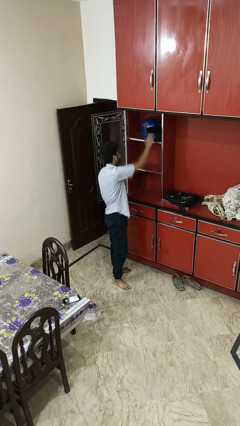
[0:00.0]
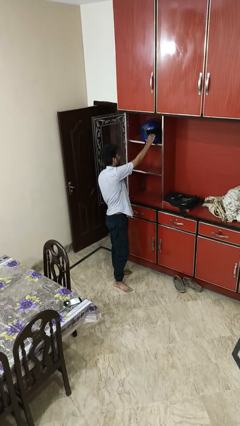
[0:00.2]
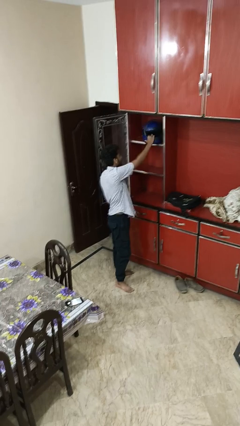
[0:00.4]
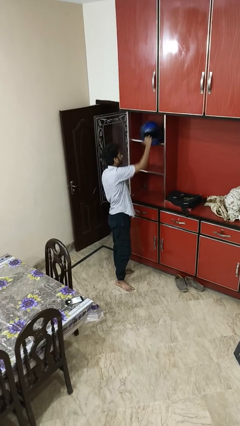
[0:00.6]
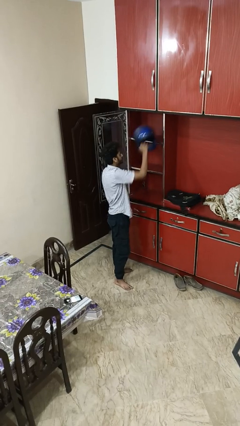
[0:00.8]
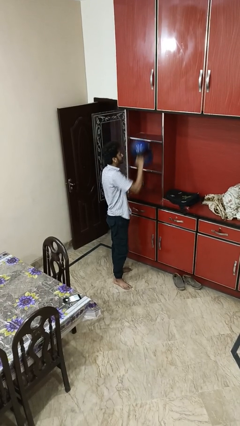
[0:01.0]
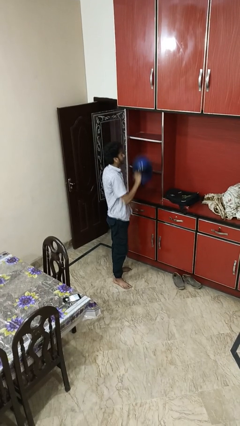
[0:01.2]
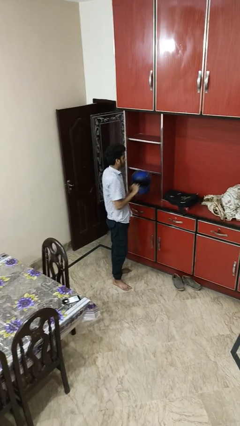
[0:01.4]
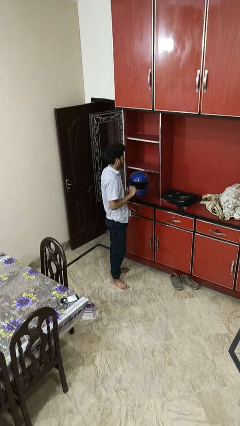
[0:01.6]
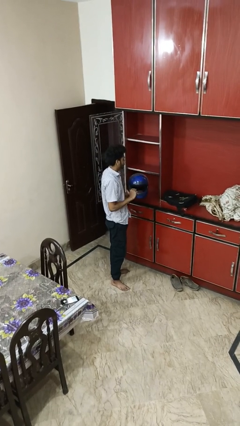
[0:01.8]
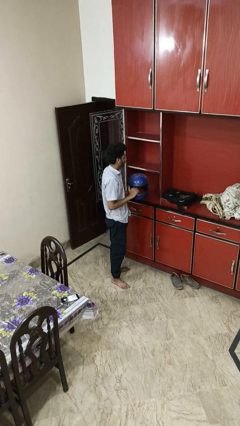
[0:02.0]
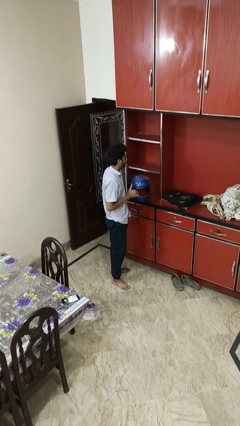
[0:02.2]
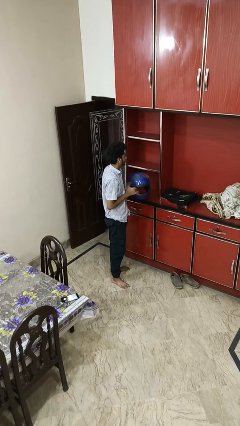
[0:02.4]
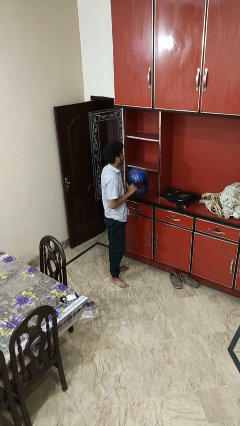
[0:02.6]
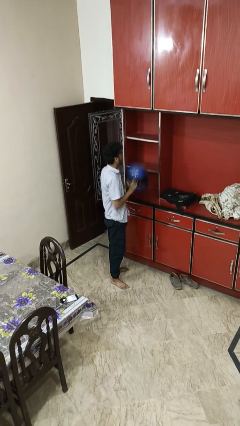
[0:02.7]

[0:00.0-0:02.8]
person picks up object from shelf

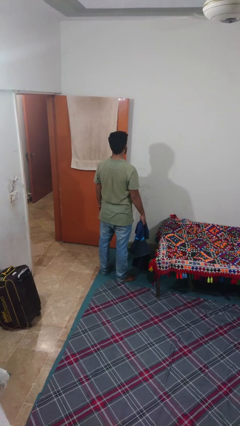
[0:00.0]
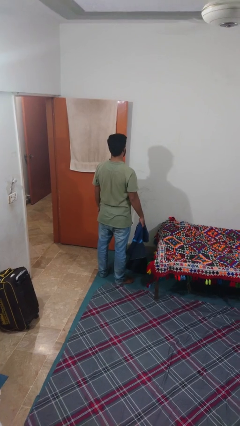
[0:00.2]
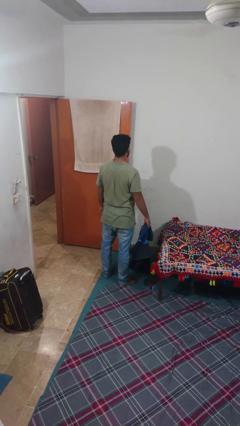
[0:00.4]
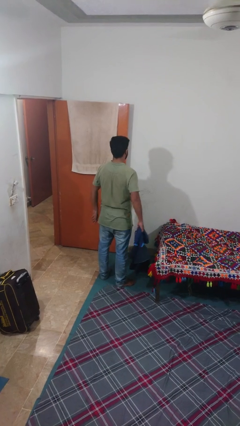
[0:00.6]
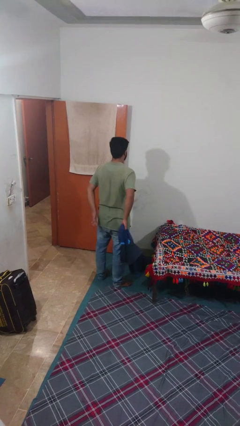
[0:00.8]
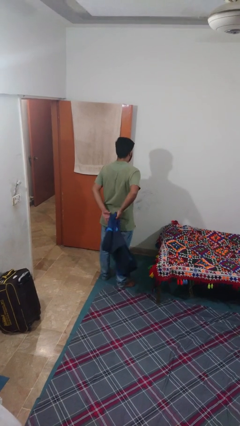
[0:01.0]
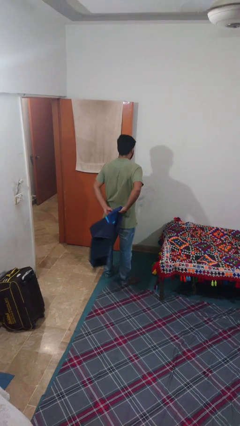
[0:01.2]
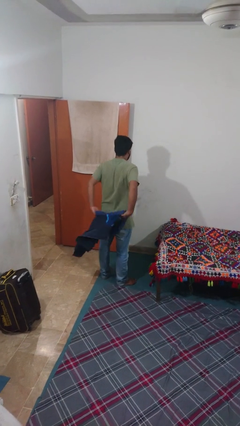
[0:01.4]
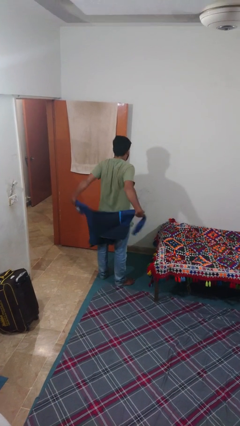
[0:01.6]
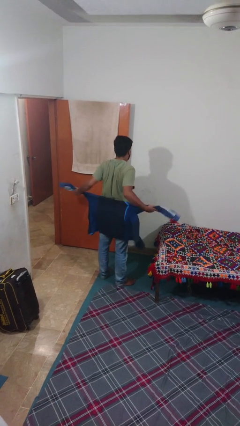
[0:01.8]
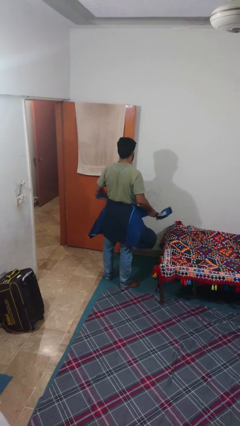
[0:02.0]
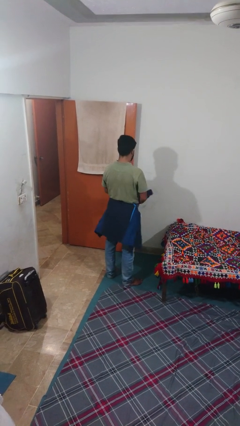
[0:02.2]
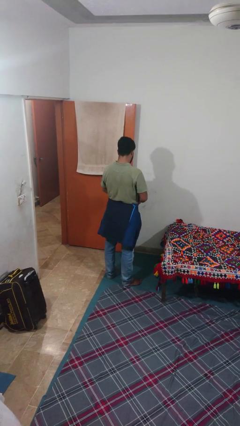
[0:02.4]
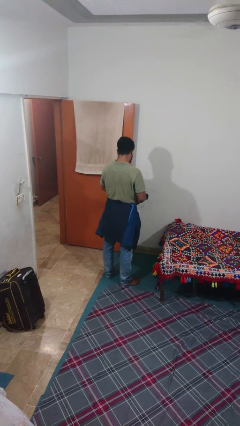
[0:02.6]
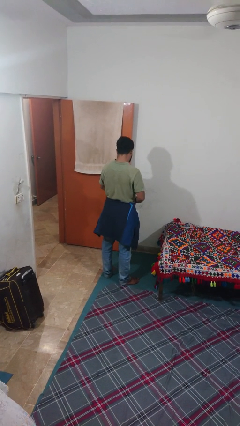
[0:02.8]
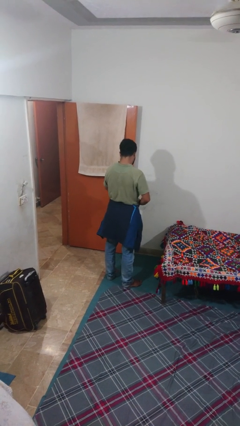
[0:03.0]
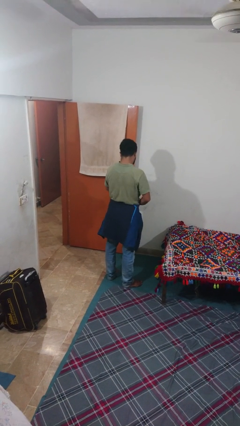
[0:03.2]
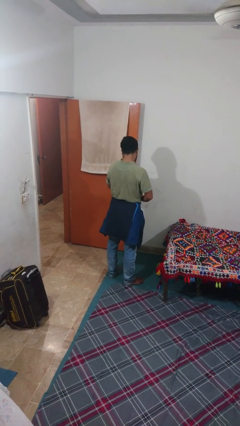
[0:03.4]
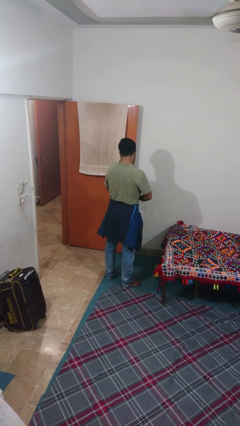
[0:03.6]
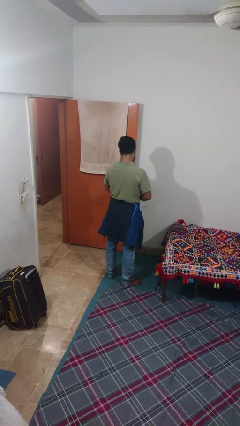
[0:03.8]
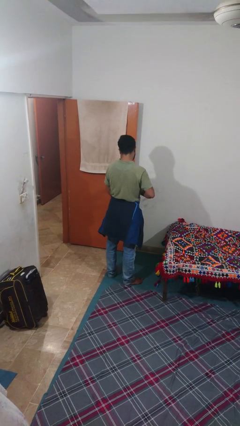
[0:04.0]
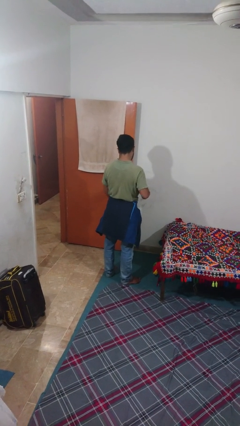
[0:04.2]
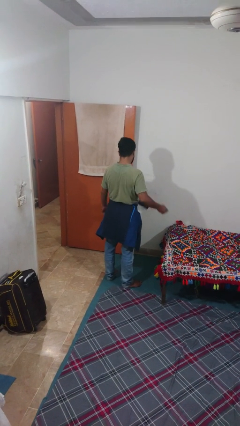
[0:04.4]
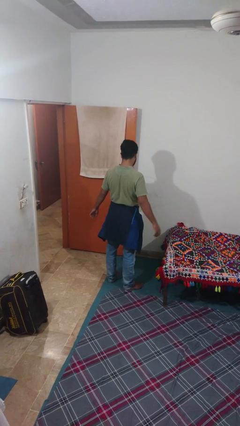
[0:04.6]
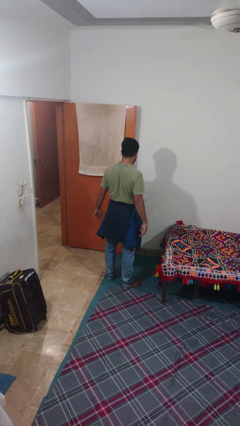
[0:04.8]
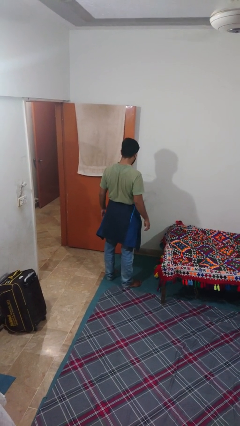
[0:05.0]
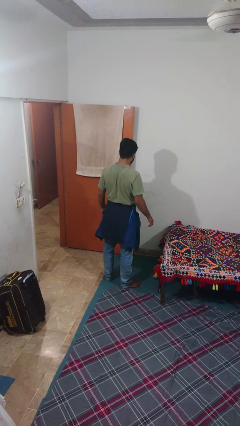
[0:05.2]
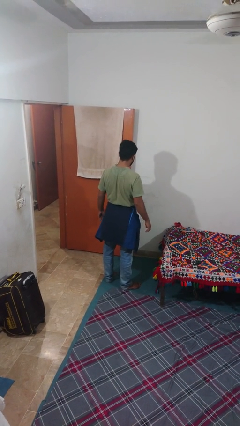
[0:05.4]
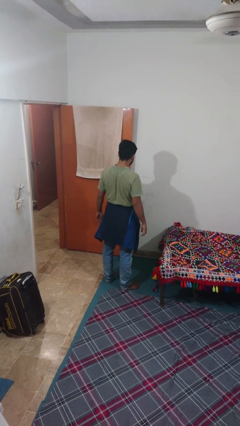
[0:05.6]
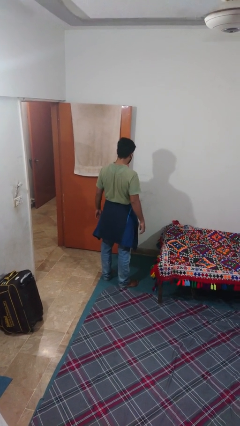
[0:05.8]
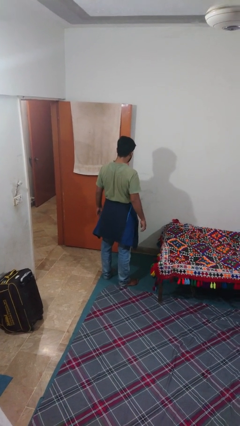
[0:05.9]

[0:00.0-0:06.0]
person ties jacket around waist

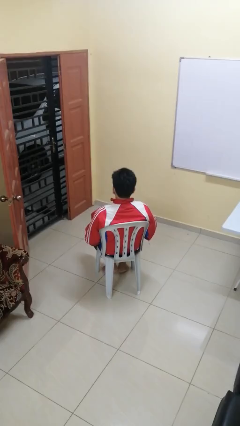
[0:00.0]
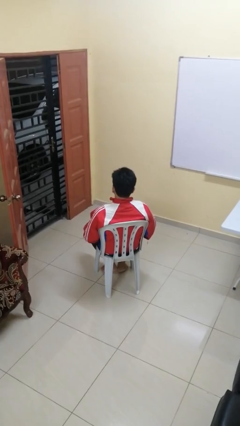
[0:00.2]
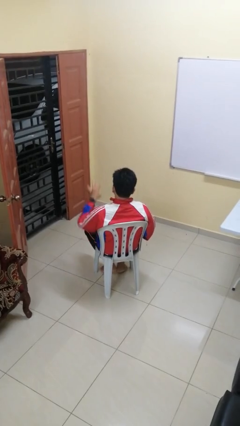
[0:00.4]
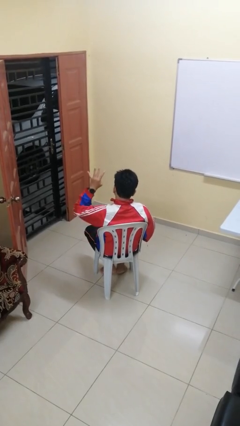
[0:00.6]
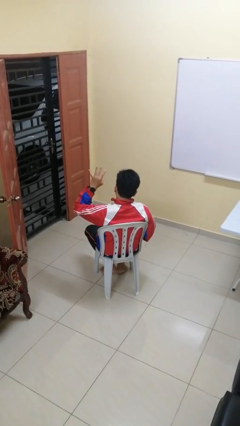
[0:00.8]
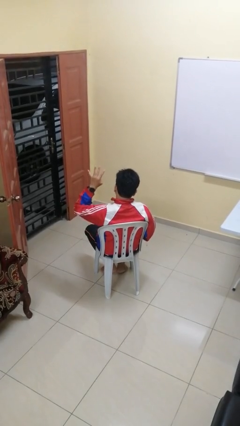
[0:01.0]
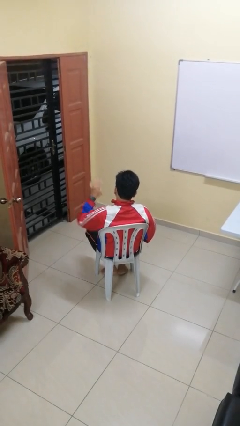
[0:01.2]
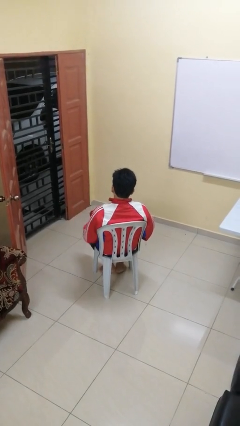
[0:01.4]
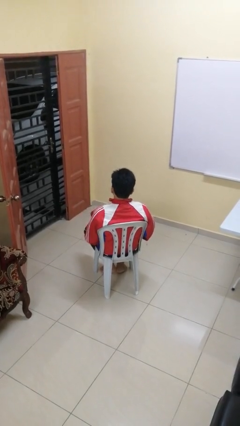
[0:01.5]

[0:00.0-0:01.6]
person gestures number four

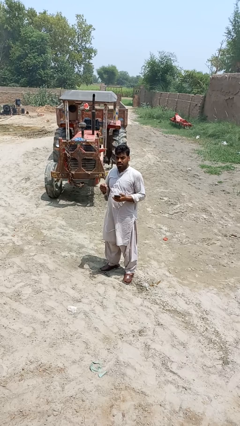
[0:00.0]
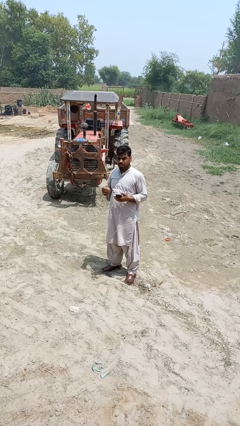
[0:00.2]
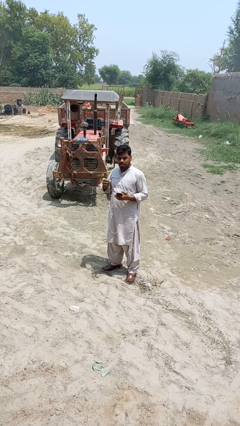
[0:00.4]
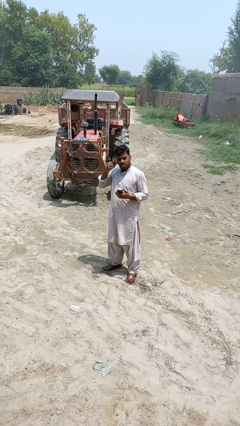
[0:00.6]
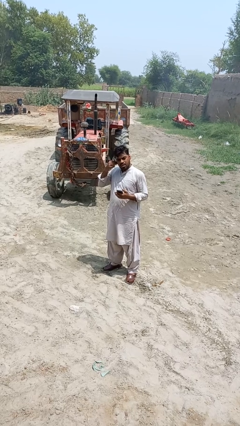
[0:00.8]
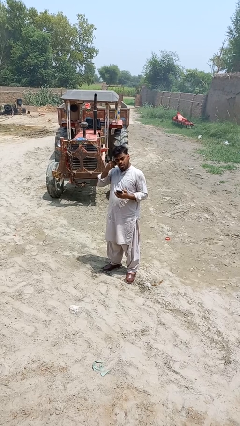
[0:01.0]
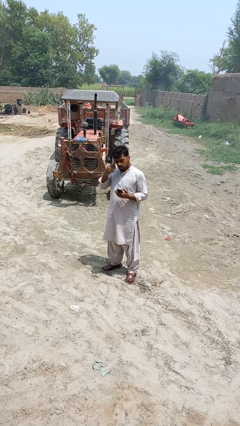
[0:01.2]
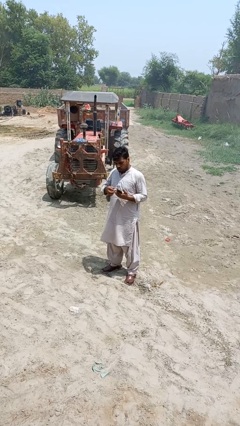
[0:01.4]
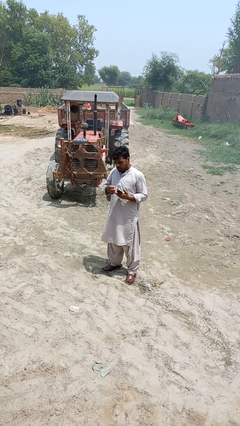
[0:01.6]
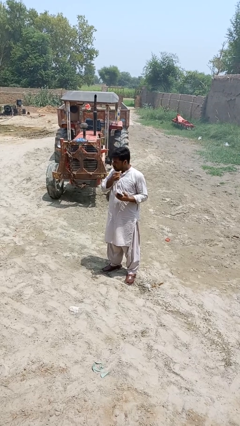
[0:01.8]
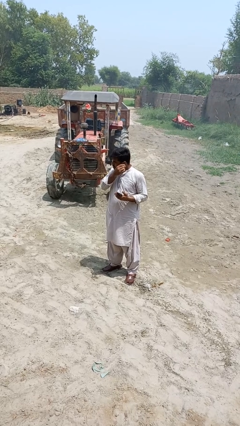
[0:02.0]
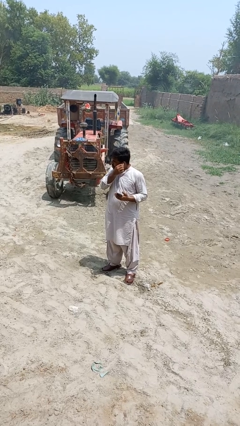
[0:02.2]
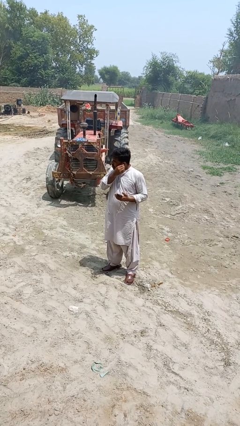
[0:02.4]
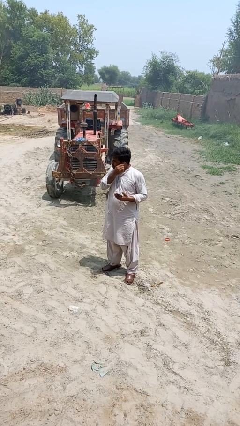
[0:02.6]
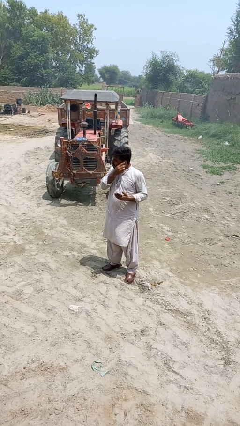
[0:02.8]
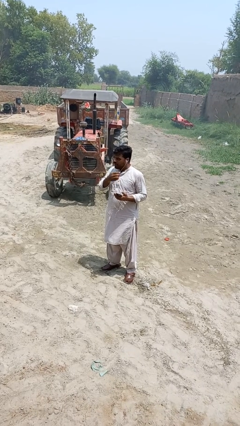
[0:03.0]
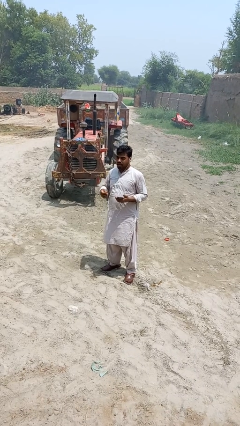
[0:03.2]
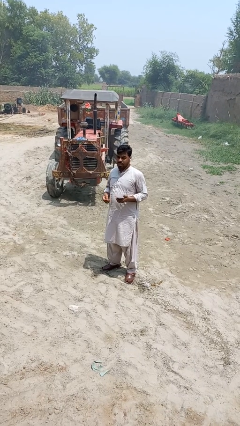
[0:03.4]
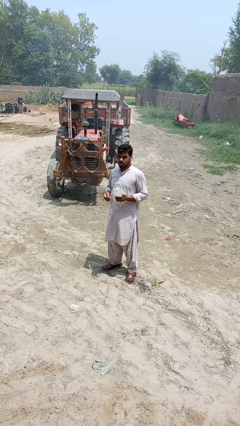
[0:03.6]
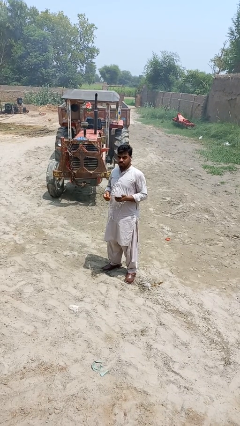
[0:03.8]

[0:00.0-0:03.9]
person puts on headphones

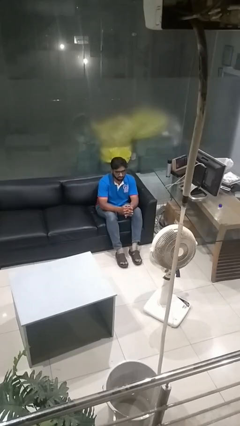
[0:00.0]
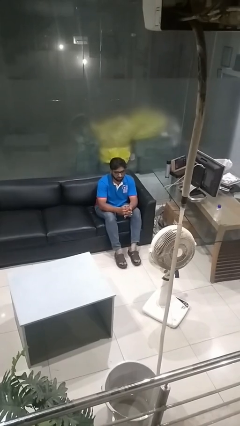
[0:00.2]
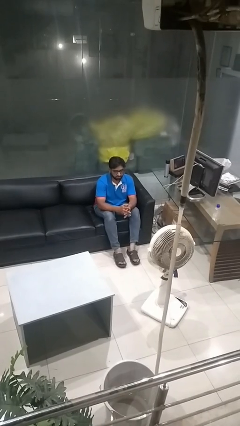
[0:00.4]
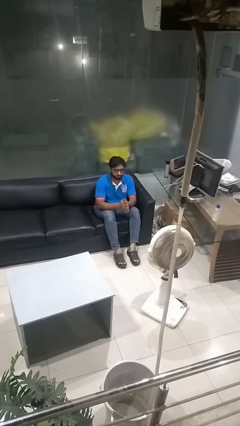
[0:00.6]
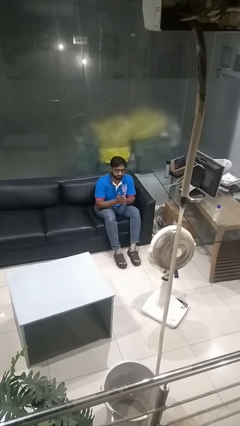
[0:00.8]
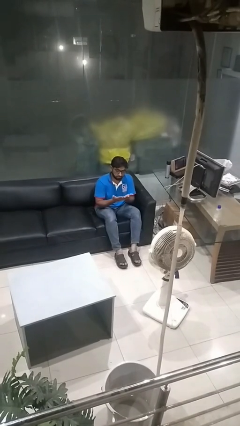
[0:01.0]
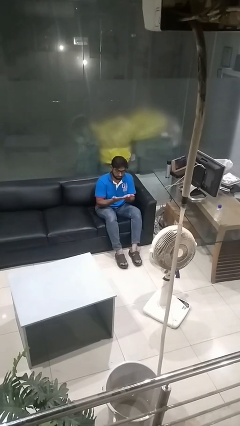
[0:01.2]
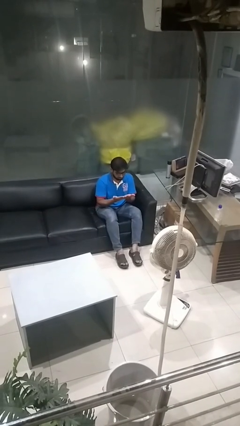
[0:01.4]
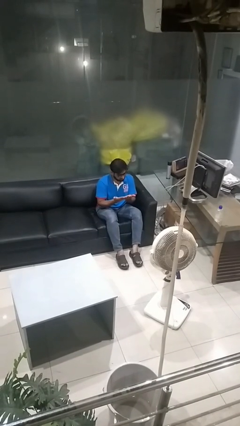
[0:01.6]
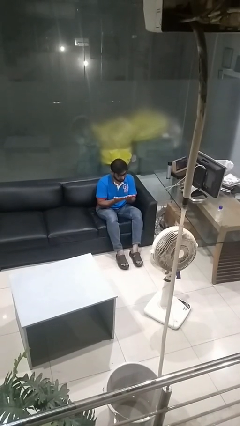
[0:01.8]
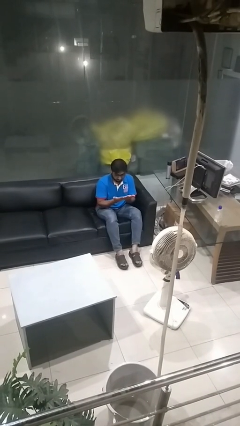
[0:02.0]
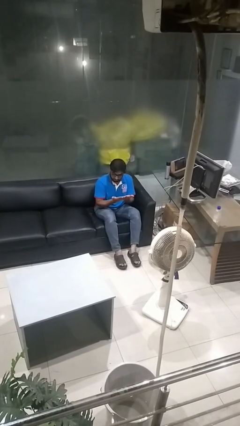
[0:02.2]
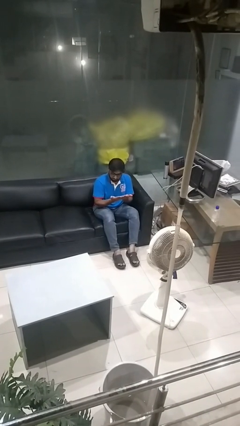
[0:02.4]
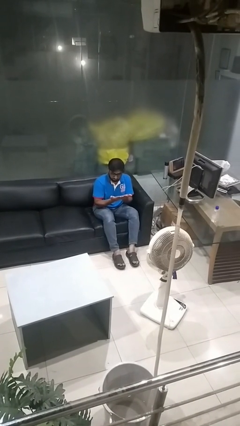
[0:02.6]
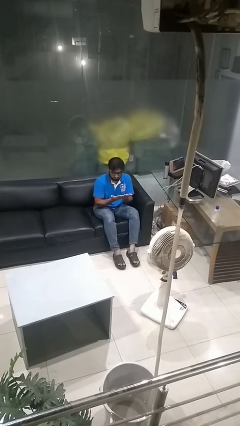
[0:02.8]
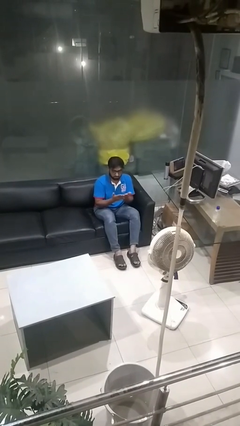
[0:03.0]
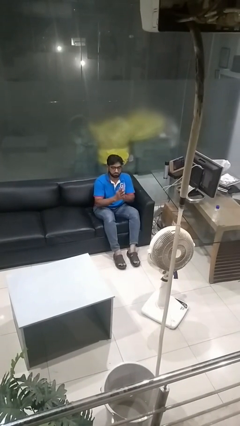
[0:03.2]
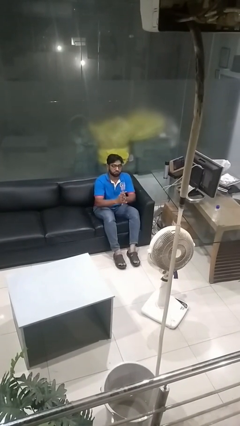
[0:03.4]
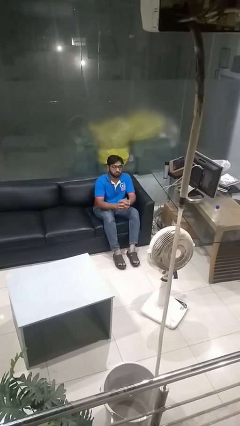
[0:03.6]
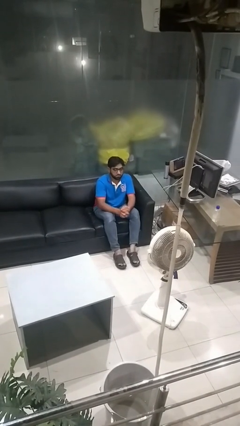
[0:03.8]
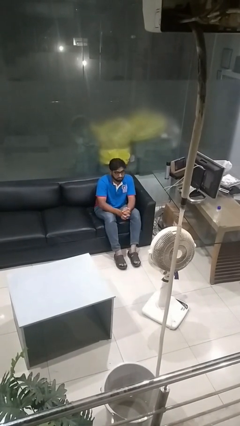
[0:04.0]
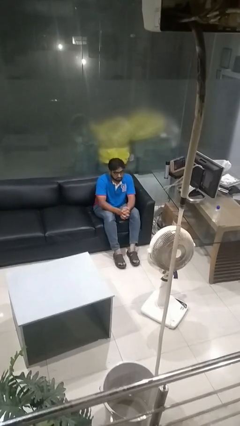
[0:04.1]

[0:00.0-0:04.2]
person looks at hands in lap
